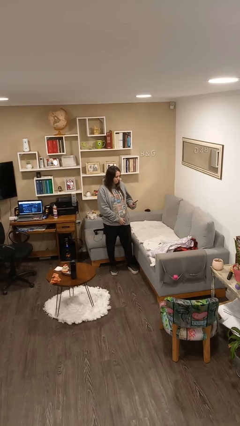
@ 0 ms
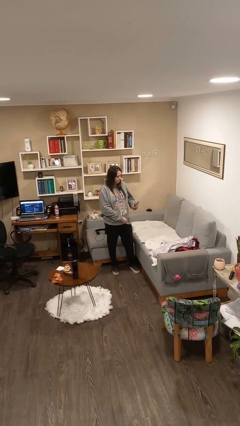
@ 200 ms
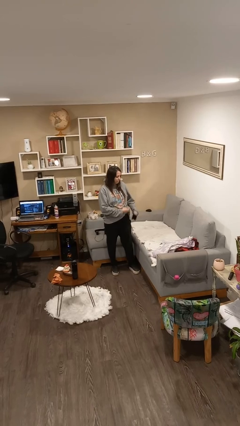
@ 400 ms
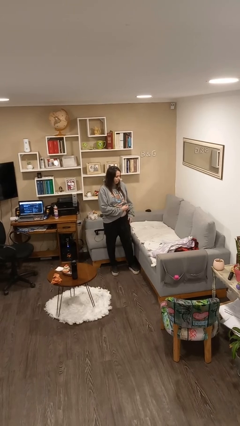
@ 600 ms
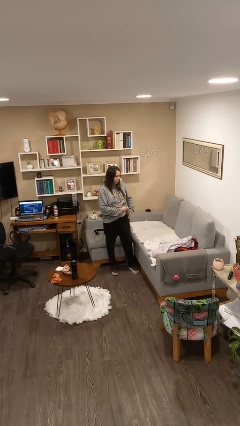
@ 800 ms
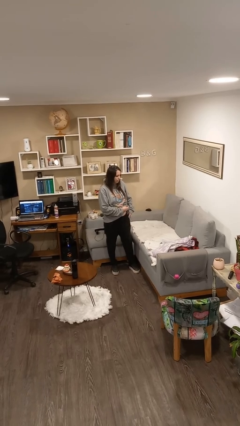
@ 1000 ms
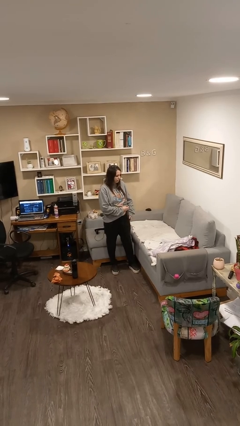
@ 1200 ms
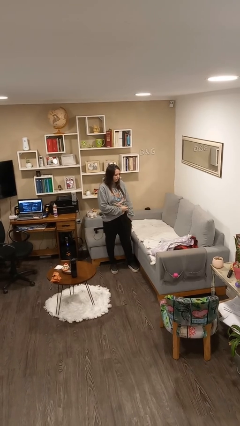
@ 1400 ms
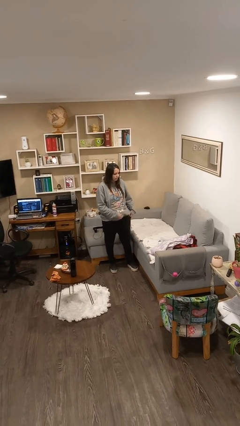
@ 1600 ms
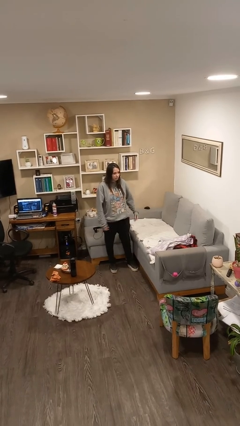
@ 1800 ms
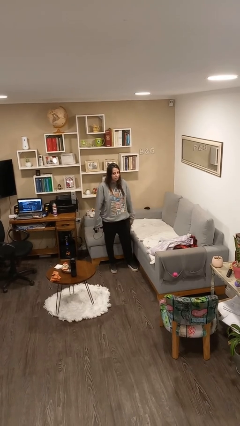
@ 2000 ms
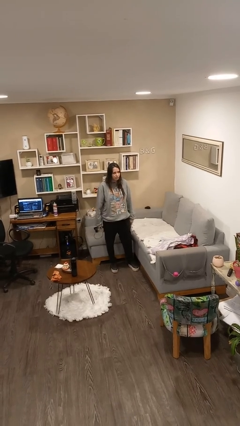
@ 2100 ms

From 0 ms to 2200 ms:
person puts phone into pocket

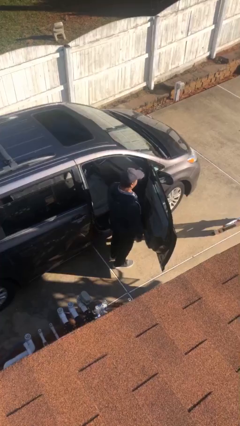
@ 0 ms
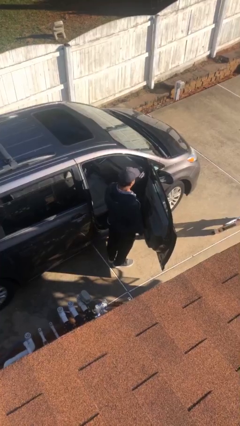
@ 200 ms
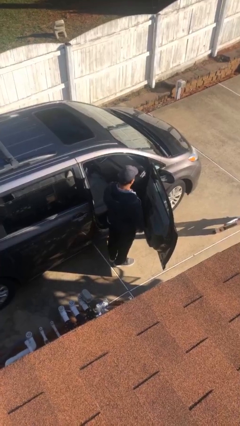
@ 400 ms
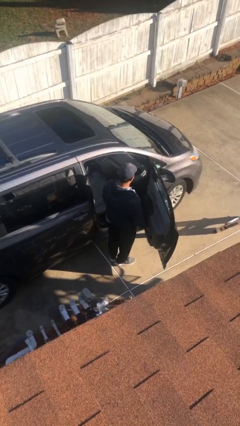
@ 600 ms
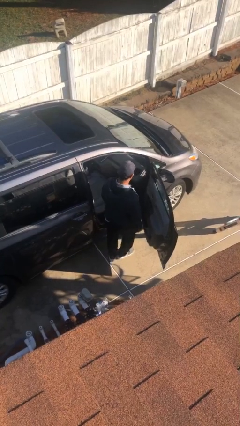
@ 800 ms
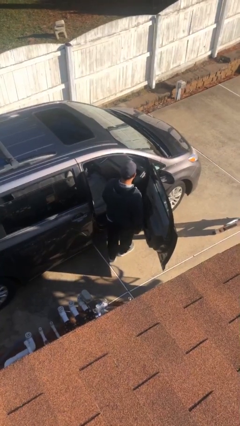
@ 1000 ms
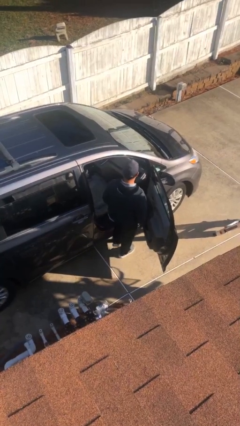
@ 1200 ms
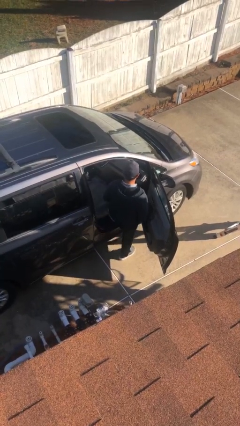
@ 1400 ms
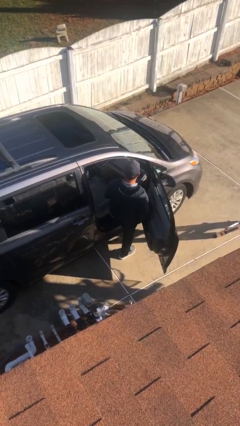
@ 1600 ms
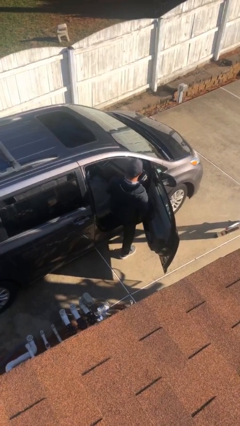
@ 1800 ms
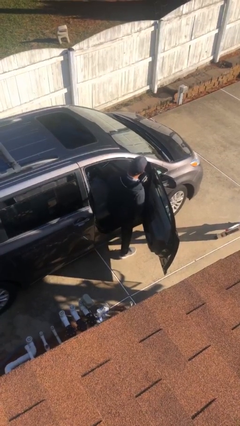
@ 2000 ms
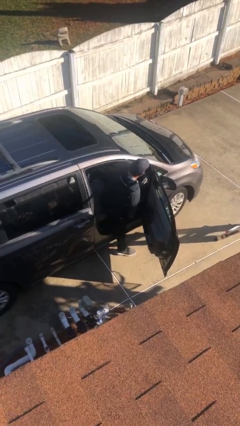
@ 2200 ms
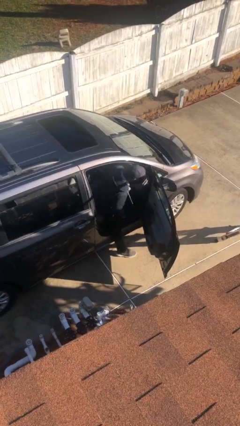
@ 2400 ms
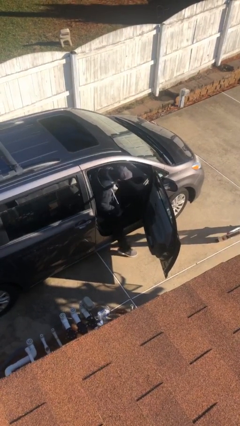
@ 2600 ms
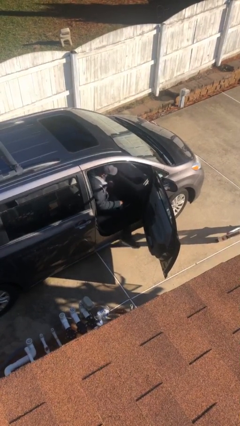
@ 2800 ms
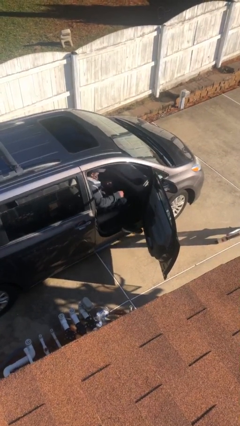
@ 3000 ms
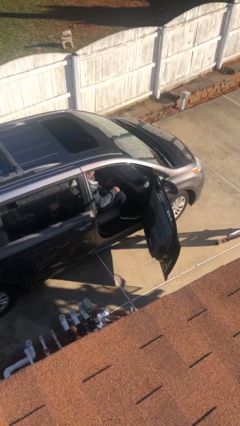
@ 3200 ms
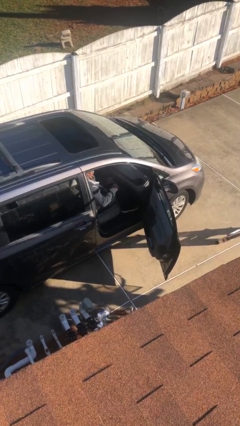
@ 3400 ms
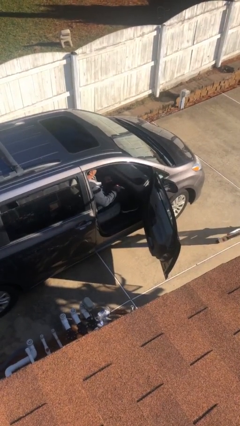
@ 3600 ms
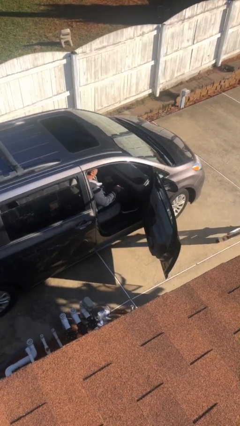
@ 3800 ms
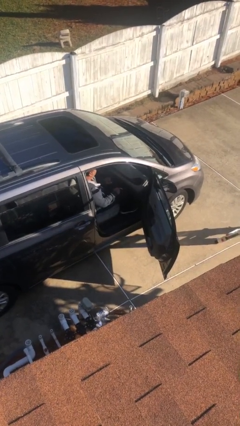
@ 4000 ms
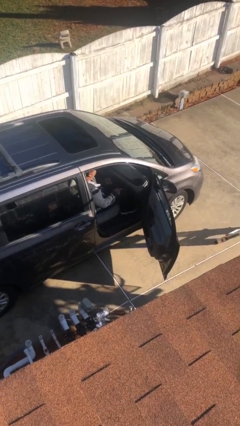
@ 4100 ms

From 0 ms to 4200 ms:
person enters car

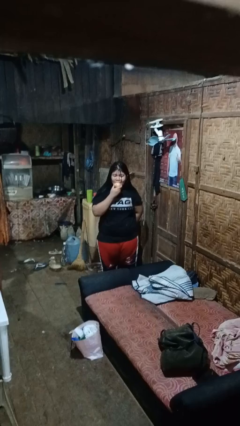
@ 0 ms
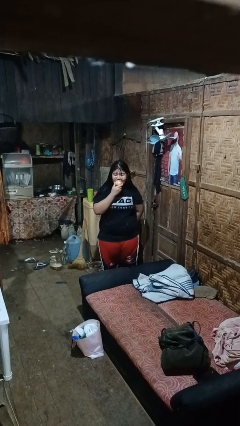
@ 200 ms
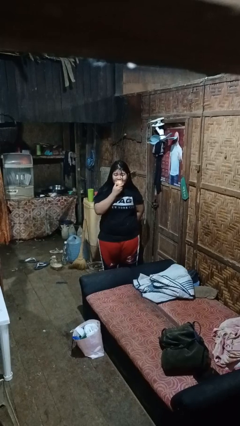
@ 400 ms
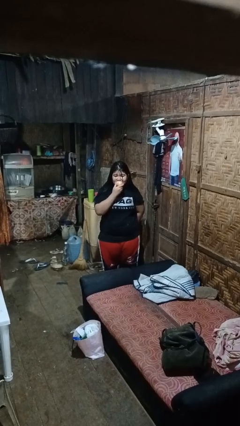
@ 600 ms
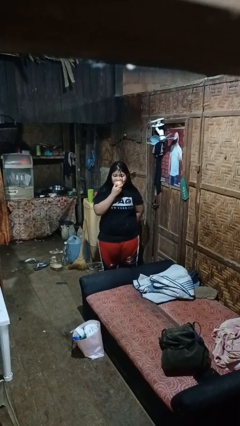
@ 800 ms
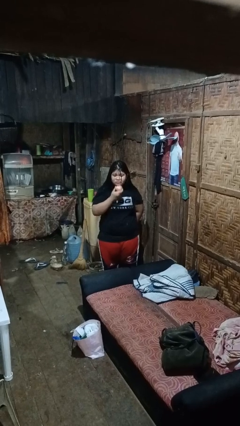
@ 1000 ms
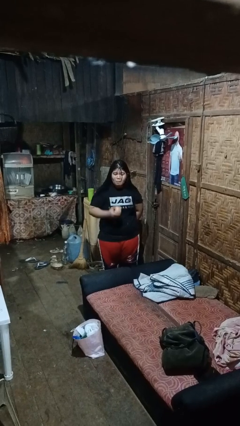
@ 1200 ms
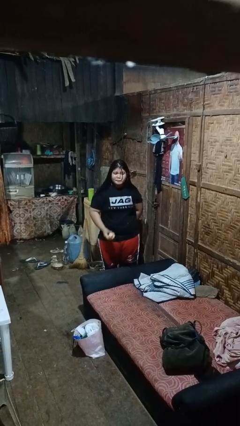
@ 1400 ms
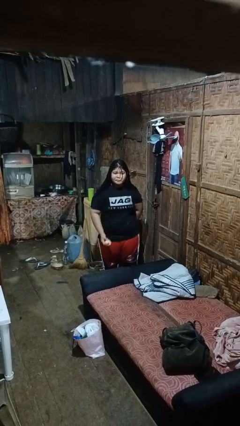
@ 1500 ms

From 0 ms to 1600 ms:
person eats apple

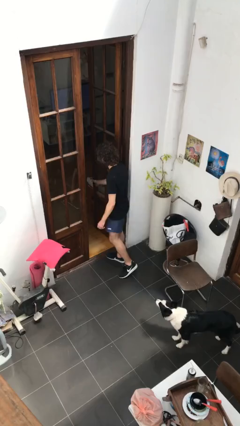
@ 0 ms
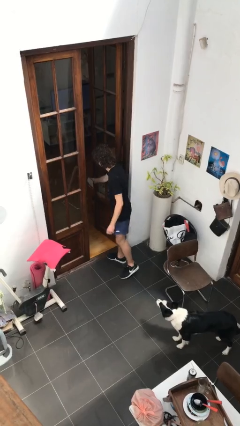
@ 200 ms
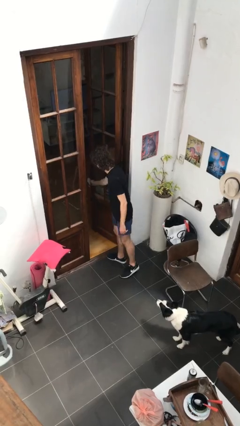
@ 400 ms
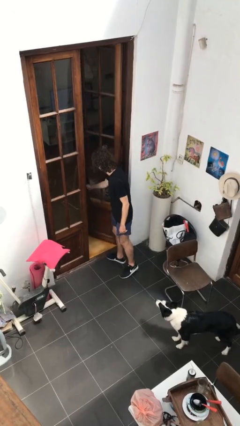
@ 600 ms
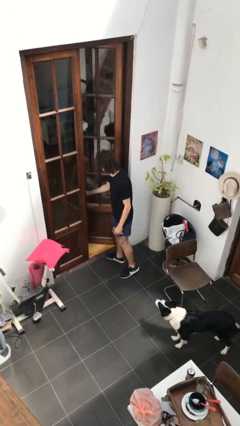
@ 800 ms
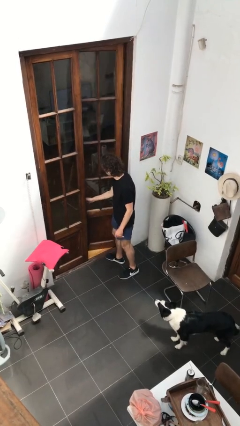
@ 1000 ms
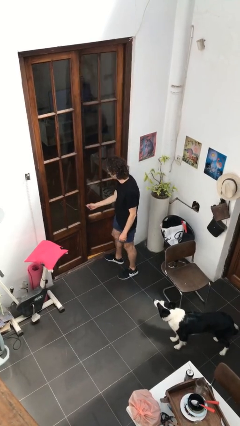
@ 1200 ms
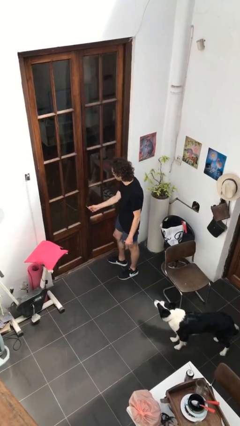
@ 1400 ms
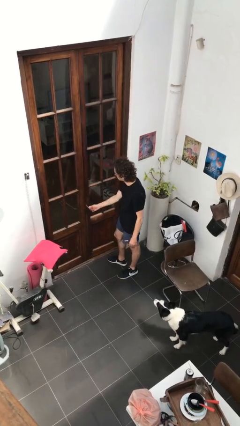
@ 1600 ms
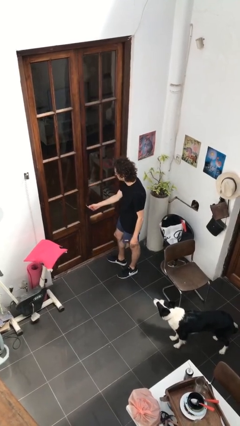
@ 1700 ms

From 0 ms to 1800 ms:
person closes facility door

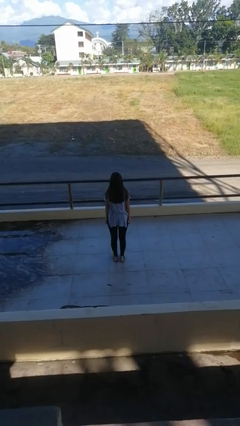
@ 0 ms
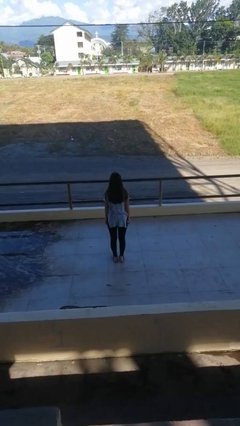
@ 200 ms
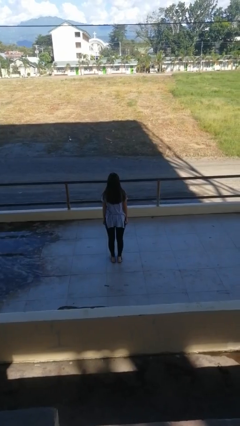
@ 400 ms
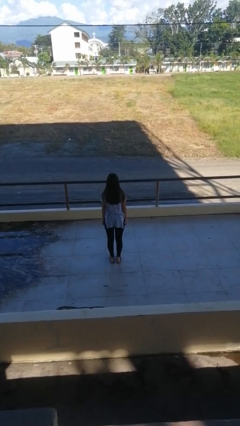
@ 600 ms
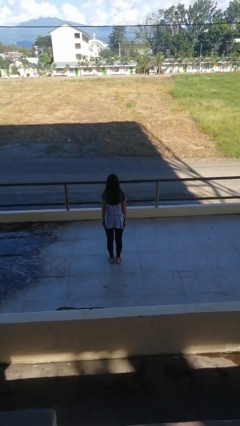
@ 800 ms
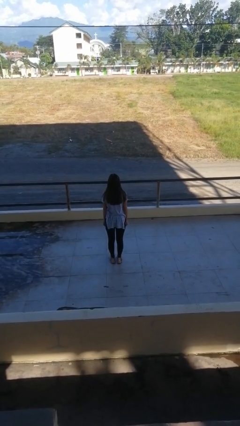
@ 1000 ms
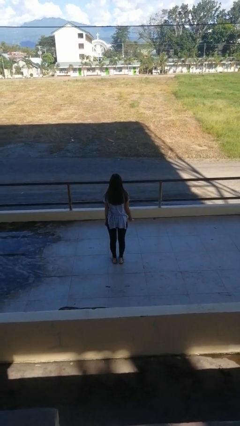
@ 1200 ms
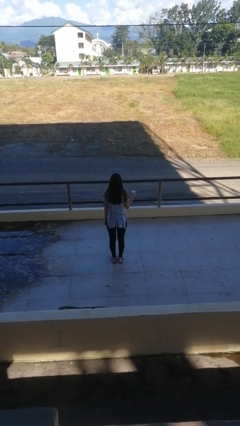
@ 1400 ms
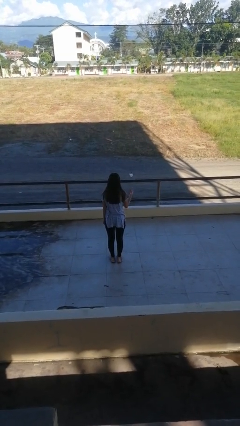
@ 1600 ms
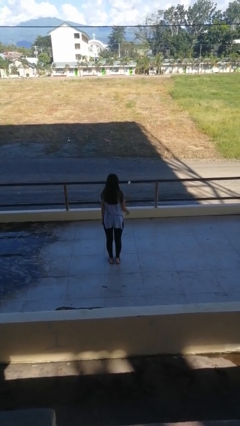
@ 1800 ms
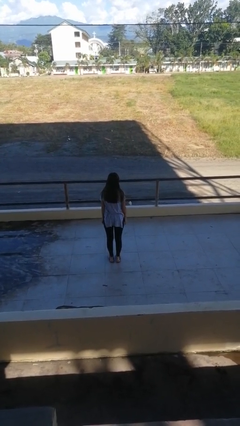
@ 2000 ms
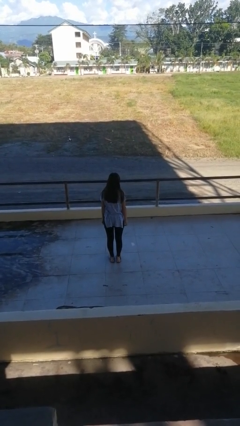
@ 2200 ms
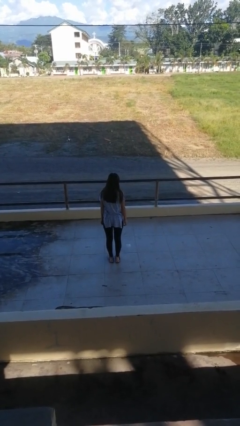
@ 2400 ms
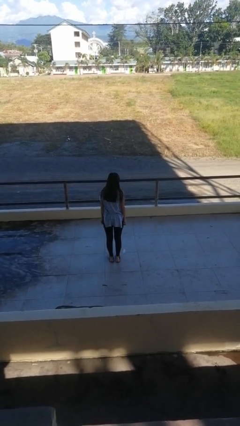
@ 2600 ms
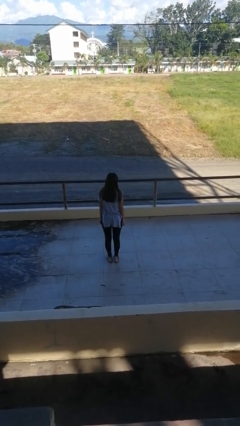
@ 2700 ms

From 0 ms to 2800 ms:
person throws object into air

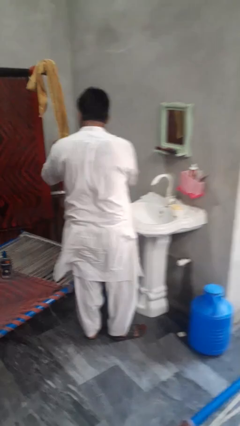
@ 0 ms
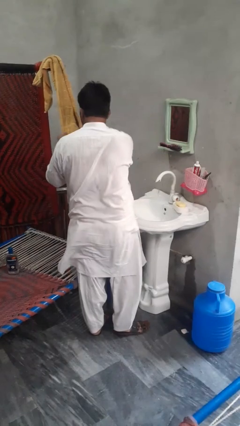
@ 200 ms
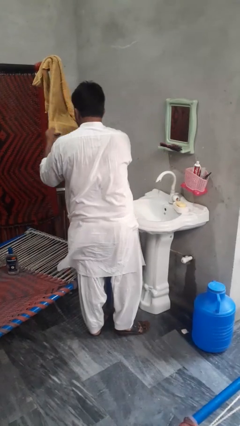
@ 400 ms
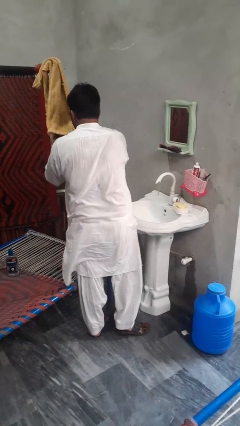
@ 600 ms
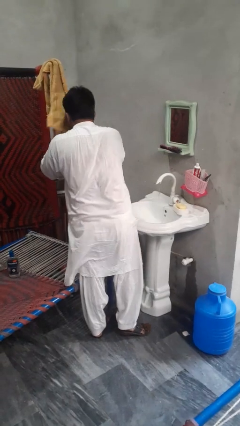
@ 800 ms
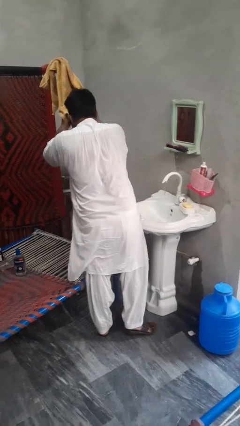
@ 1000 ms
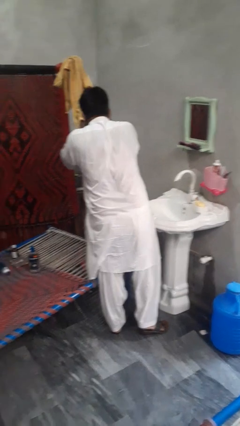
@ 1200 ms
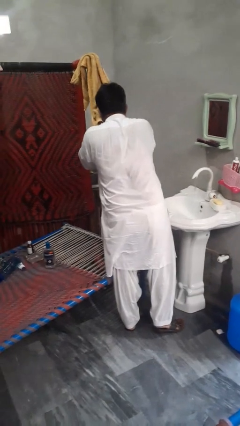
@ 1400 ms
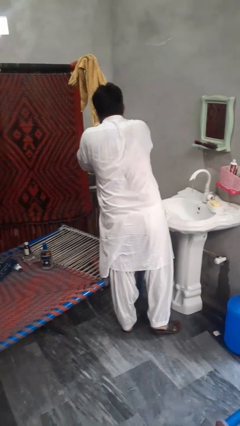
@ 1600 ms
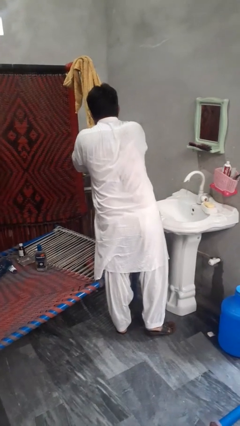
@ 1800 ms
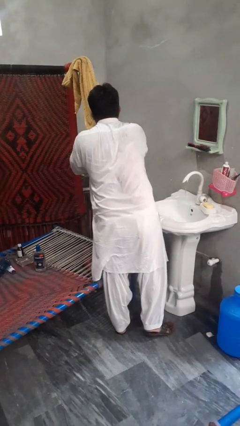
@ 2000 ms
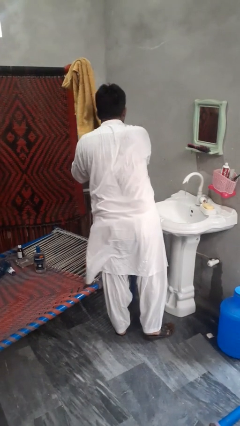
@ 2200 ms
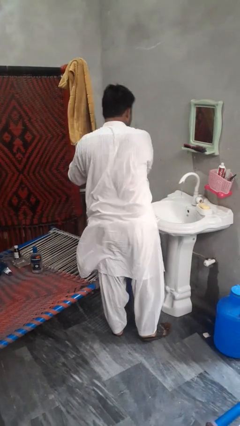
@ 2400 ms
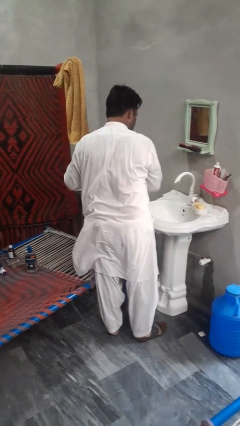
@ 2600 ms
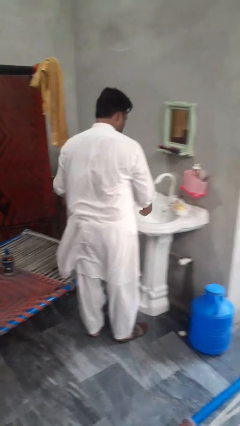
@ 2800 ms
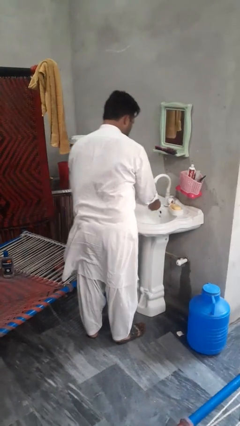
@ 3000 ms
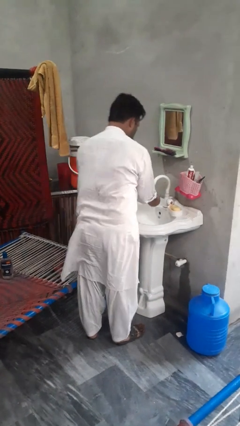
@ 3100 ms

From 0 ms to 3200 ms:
person dries face with towel

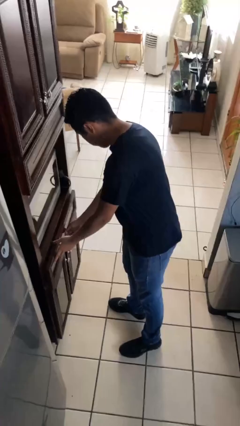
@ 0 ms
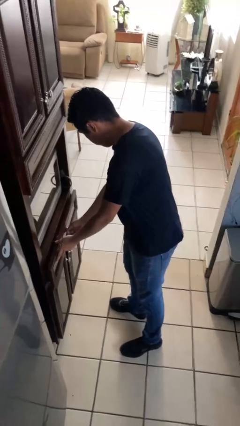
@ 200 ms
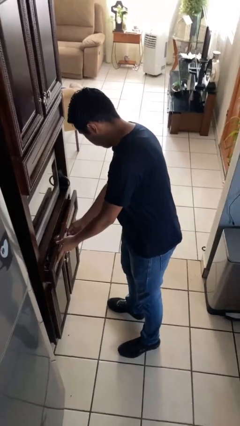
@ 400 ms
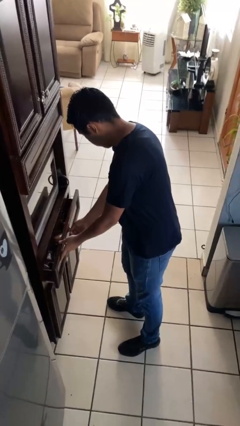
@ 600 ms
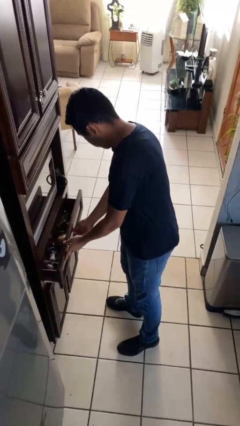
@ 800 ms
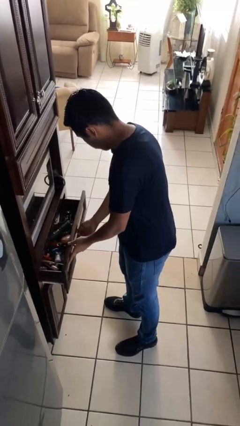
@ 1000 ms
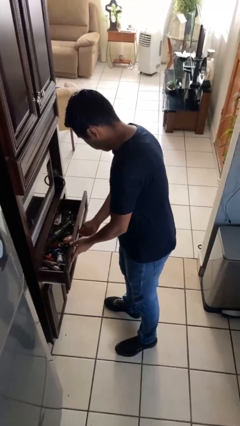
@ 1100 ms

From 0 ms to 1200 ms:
person opens kitchen drawer
